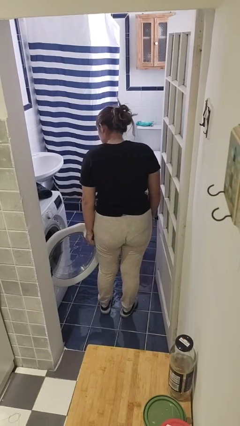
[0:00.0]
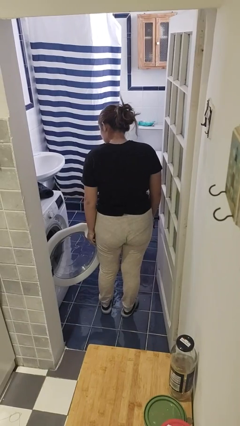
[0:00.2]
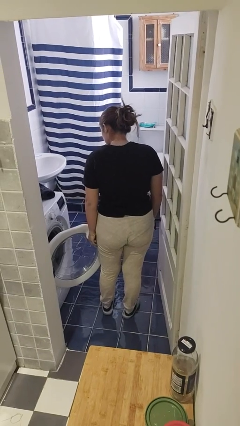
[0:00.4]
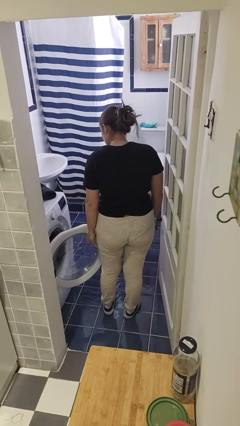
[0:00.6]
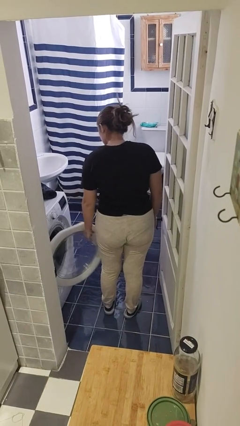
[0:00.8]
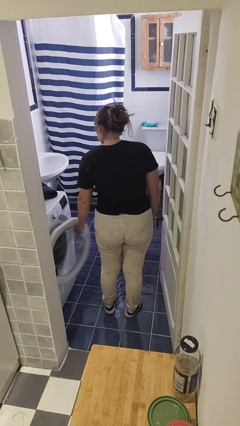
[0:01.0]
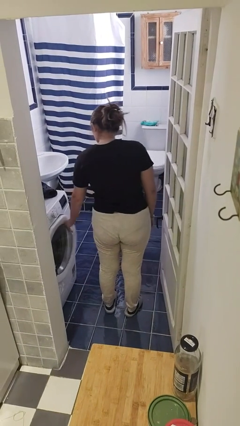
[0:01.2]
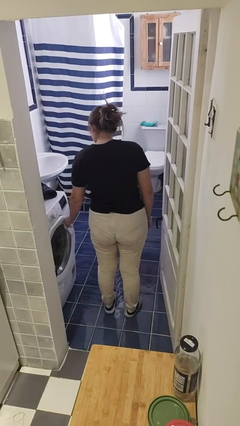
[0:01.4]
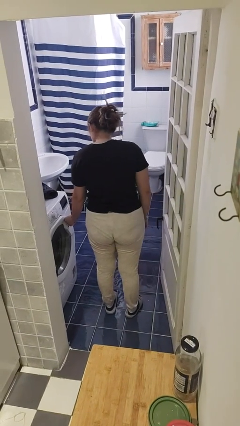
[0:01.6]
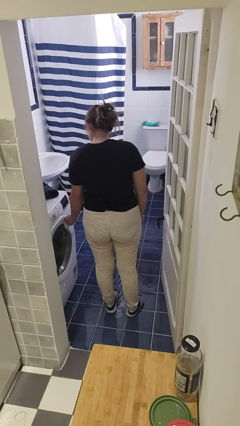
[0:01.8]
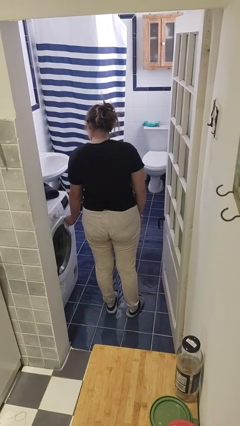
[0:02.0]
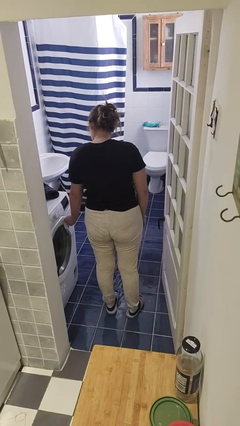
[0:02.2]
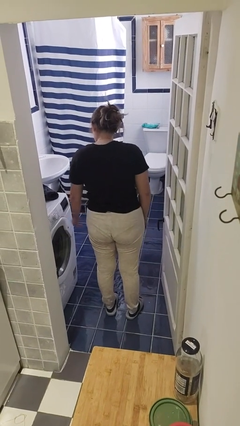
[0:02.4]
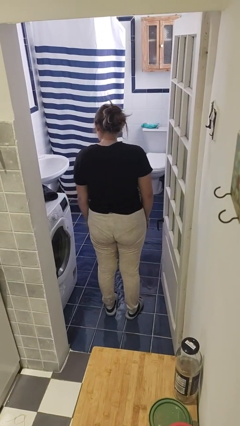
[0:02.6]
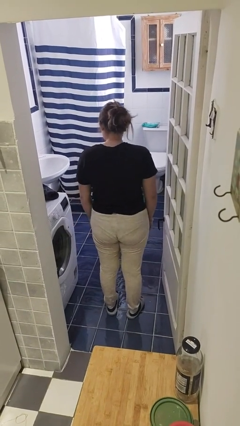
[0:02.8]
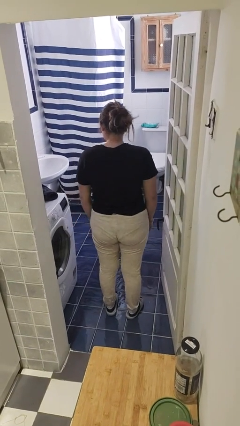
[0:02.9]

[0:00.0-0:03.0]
person closes clothes washer

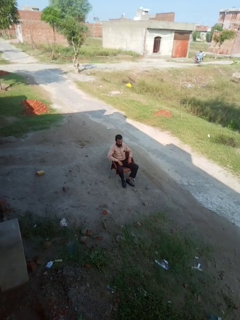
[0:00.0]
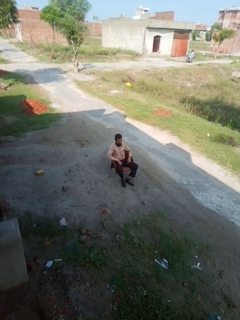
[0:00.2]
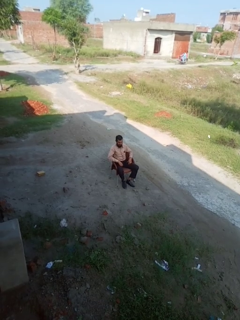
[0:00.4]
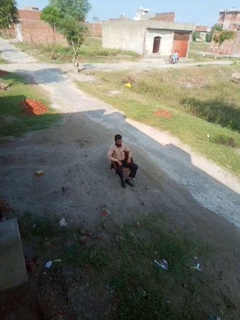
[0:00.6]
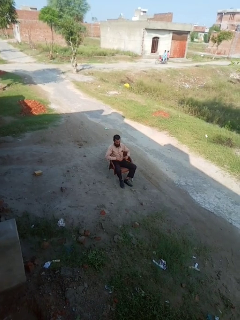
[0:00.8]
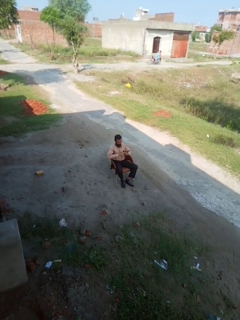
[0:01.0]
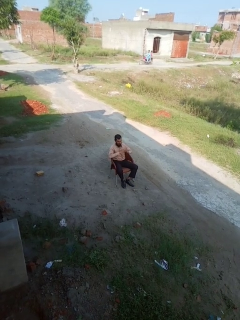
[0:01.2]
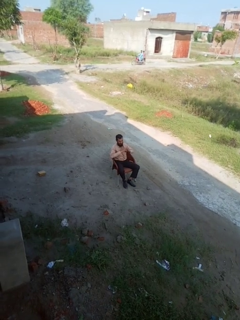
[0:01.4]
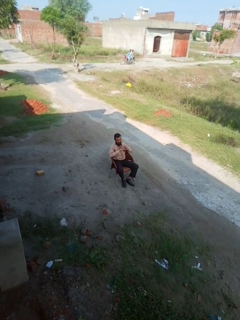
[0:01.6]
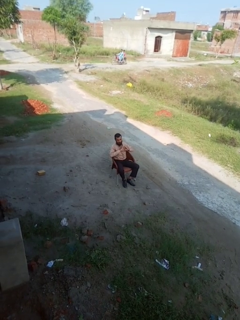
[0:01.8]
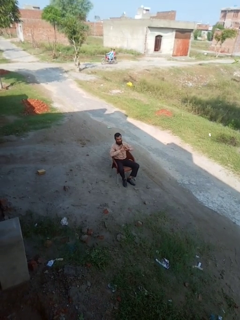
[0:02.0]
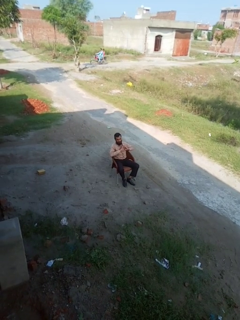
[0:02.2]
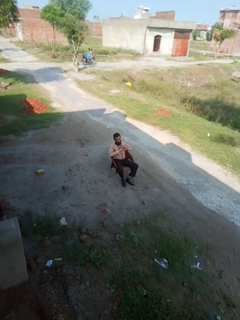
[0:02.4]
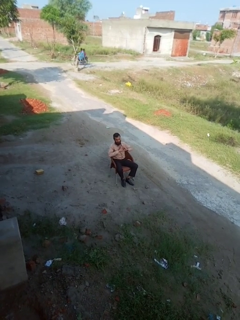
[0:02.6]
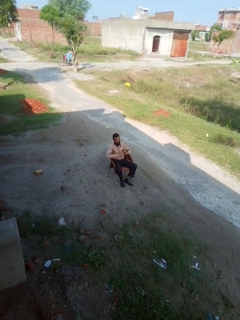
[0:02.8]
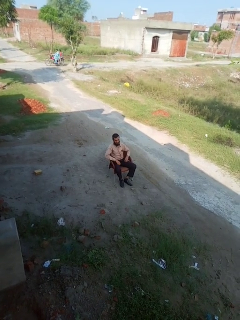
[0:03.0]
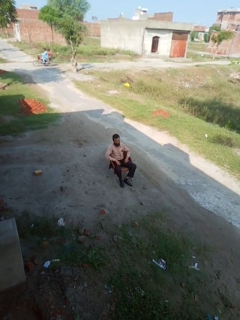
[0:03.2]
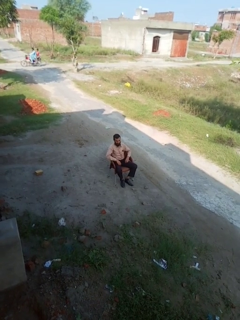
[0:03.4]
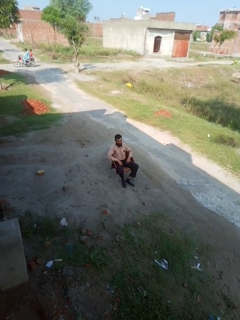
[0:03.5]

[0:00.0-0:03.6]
person gestures heart

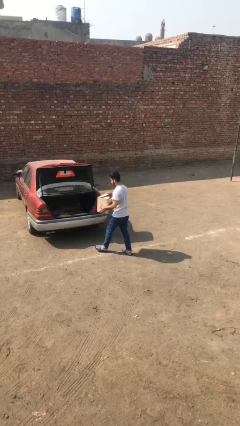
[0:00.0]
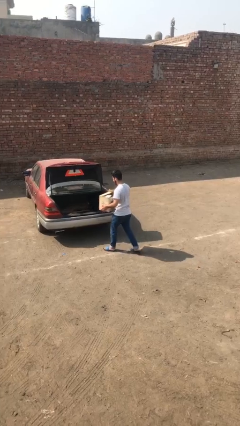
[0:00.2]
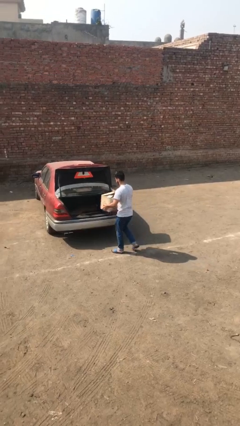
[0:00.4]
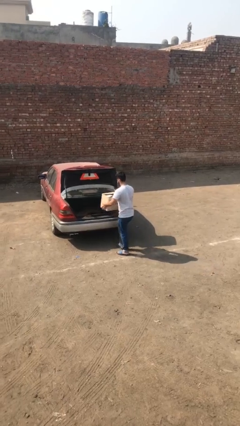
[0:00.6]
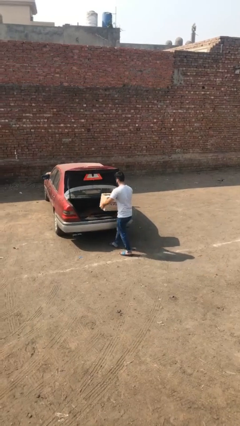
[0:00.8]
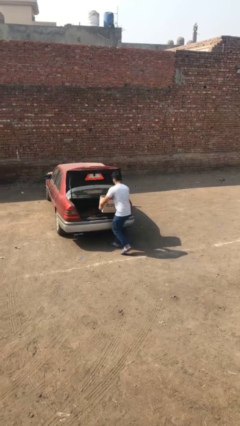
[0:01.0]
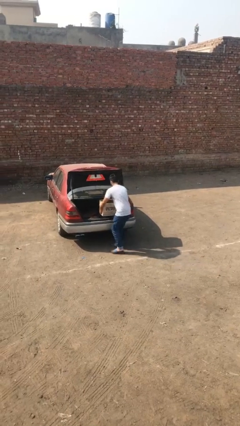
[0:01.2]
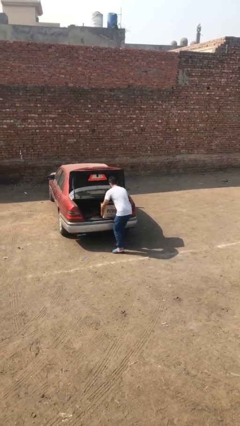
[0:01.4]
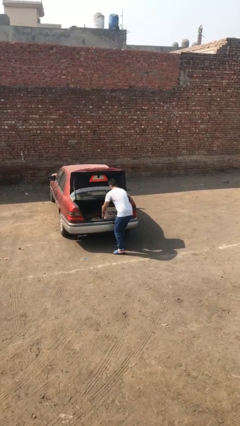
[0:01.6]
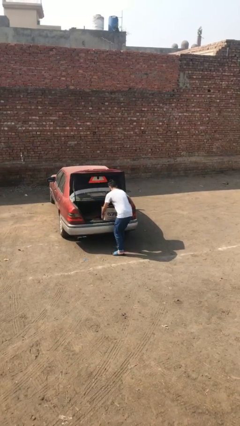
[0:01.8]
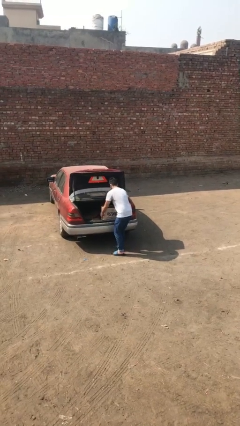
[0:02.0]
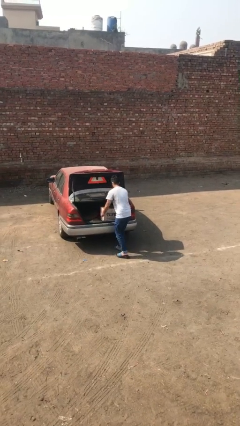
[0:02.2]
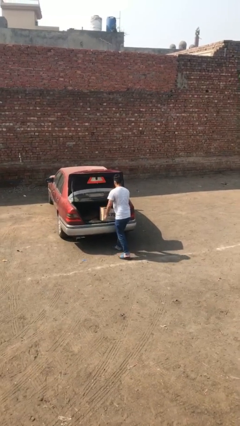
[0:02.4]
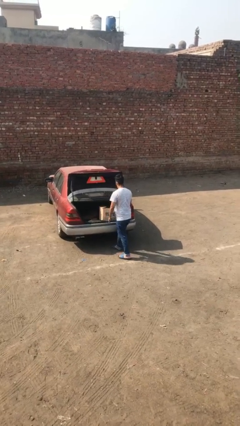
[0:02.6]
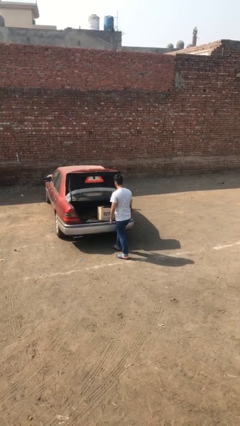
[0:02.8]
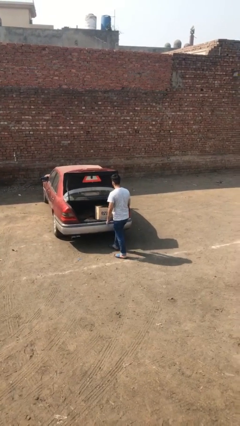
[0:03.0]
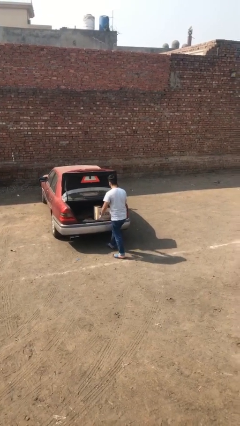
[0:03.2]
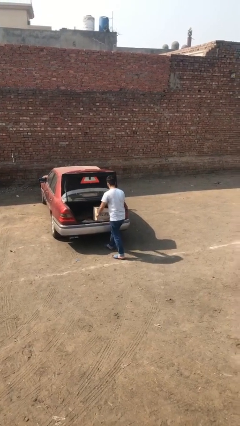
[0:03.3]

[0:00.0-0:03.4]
person loads car

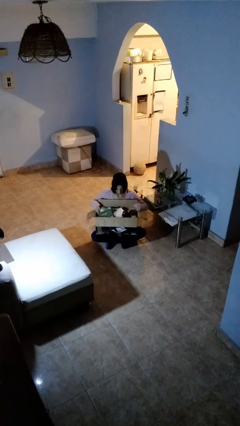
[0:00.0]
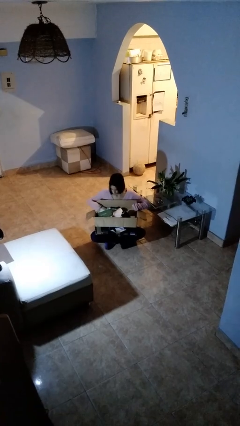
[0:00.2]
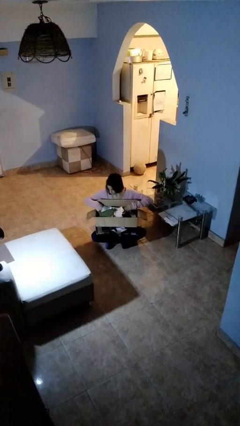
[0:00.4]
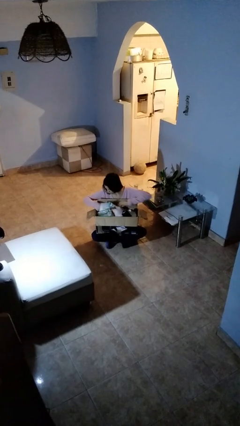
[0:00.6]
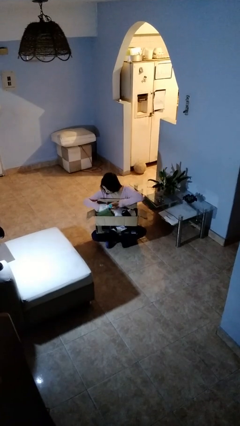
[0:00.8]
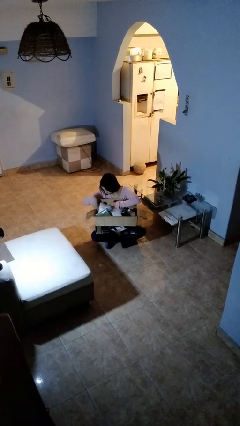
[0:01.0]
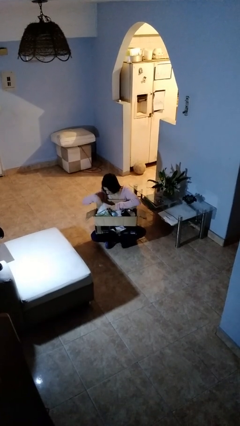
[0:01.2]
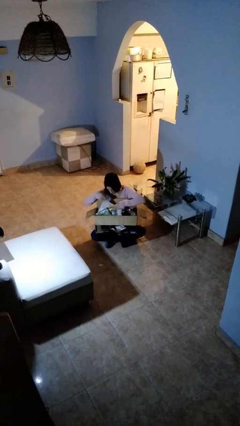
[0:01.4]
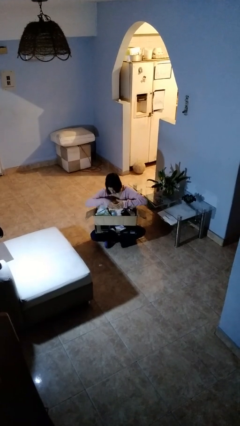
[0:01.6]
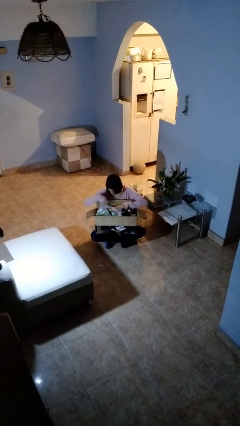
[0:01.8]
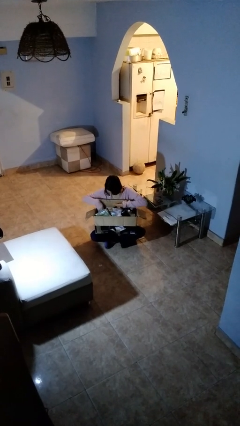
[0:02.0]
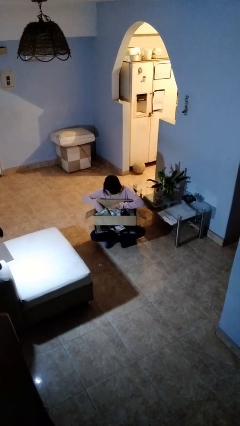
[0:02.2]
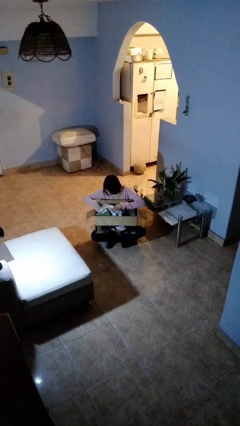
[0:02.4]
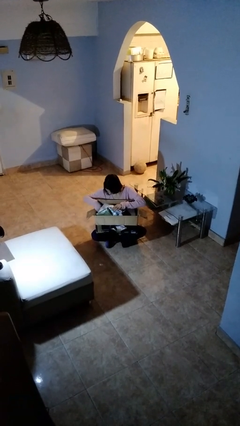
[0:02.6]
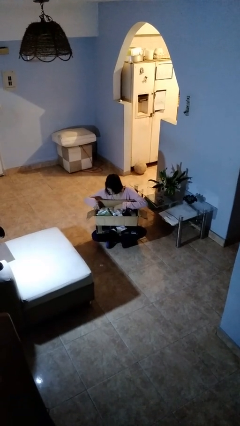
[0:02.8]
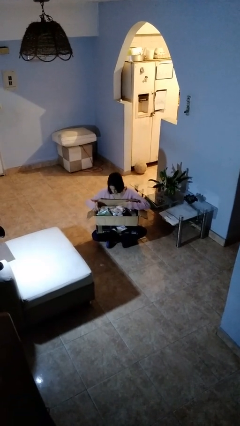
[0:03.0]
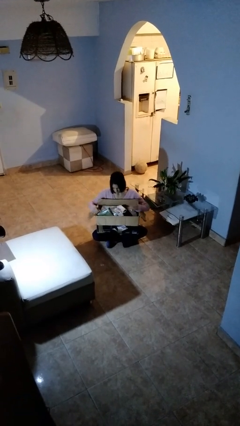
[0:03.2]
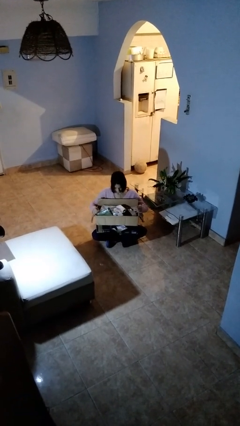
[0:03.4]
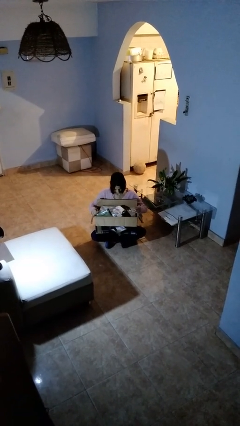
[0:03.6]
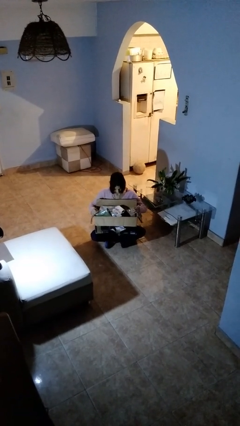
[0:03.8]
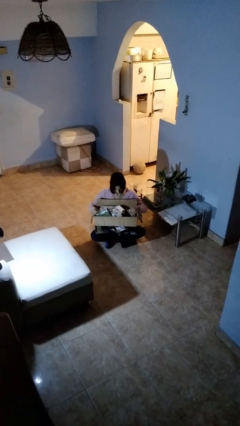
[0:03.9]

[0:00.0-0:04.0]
person searches in box

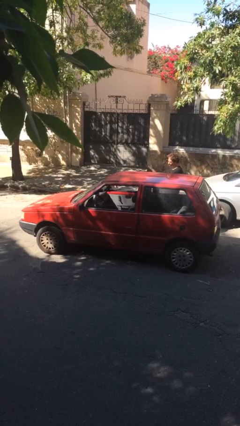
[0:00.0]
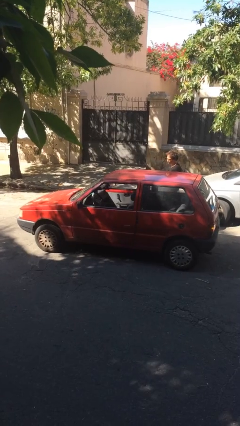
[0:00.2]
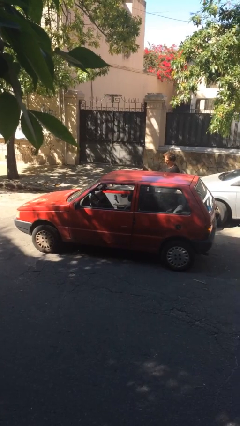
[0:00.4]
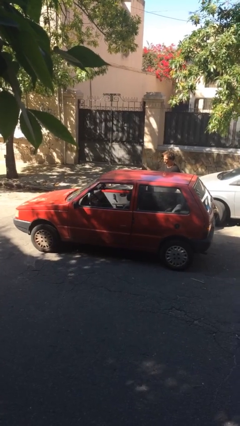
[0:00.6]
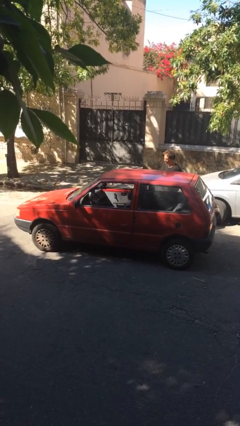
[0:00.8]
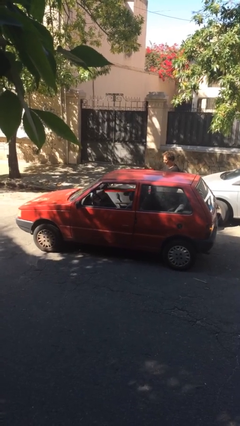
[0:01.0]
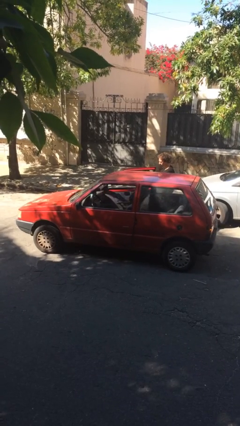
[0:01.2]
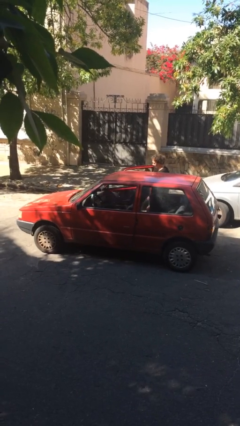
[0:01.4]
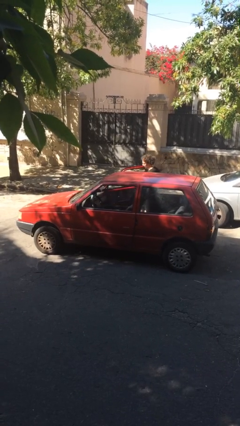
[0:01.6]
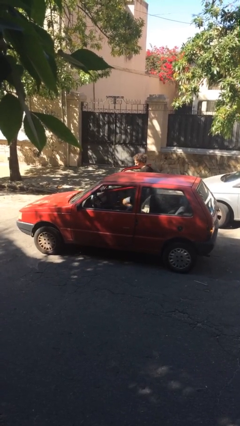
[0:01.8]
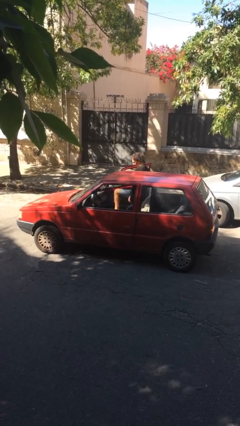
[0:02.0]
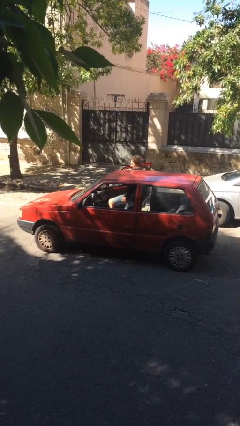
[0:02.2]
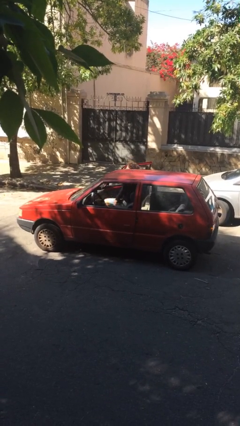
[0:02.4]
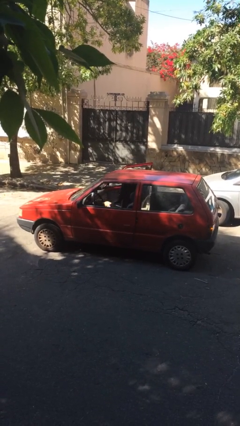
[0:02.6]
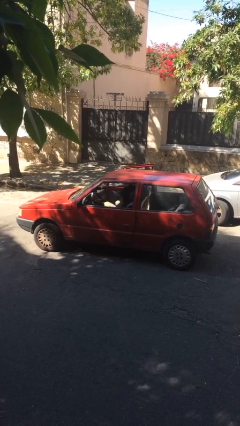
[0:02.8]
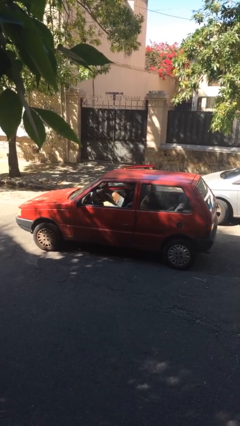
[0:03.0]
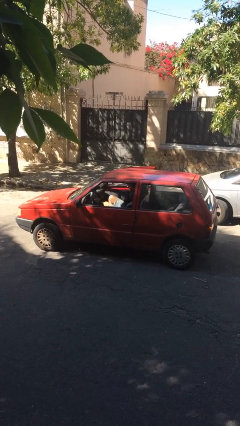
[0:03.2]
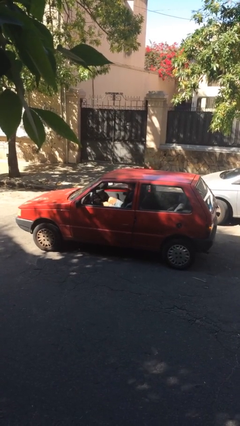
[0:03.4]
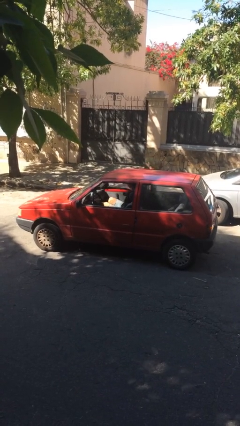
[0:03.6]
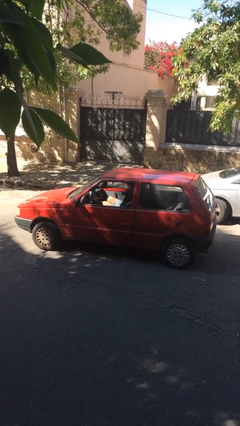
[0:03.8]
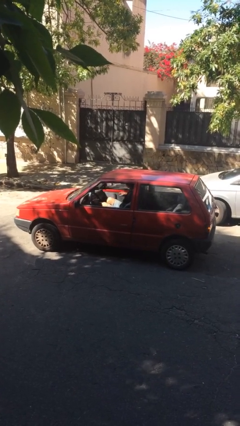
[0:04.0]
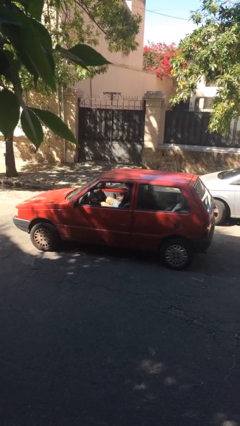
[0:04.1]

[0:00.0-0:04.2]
car picks up person

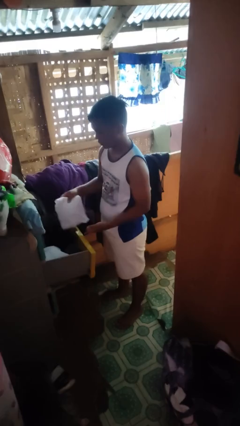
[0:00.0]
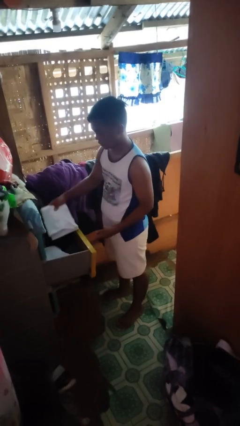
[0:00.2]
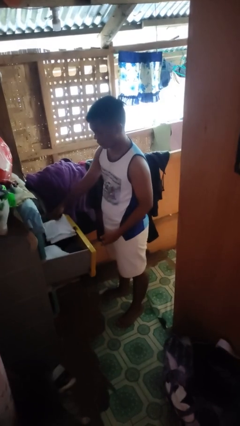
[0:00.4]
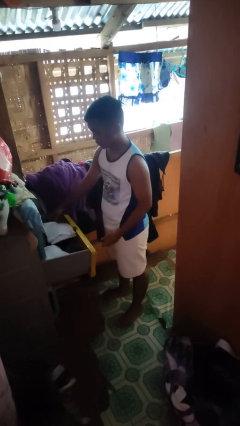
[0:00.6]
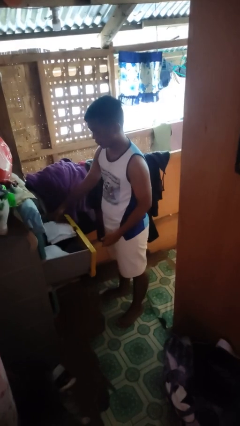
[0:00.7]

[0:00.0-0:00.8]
person puts clothes into dresser
